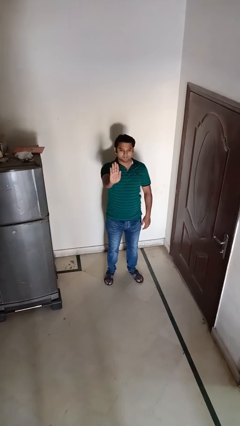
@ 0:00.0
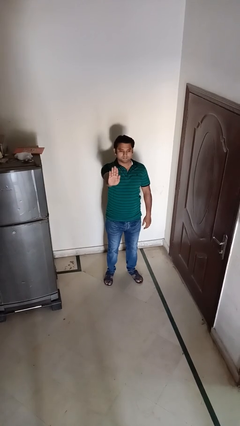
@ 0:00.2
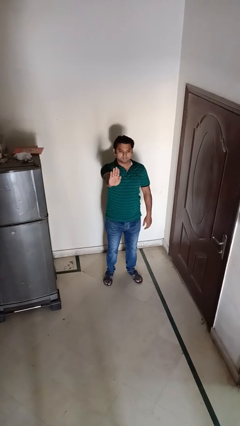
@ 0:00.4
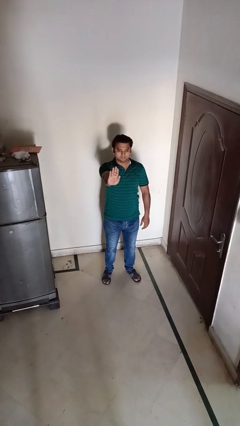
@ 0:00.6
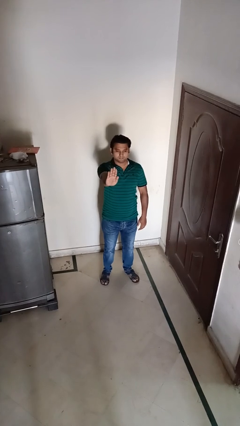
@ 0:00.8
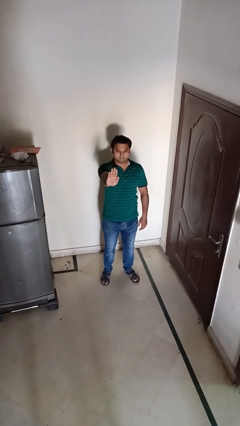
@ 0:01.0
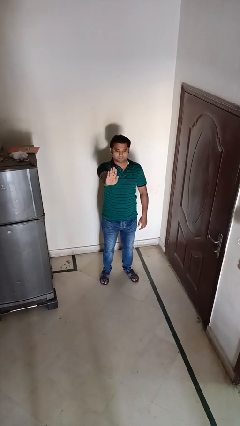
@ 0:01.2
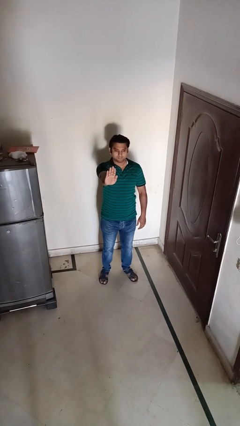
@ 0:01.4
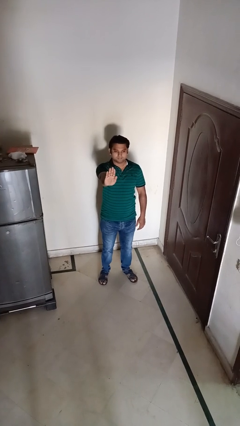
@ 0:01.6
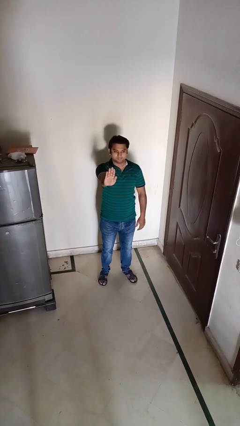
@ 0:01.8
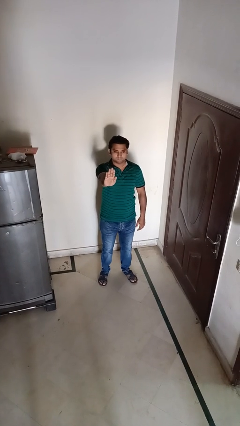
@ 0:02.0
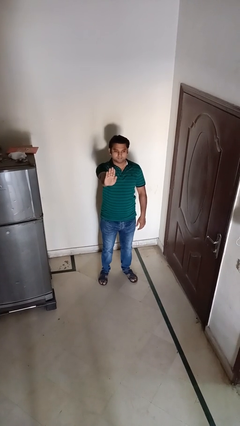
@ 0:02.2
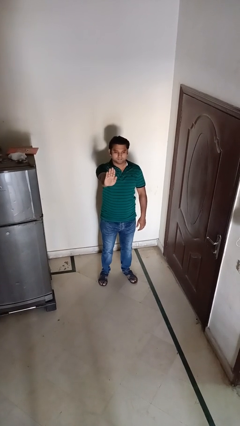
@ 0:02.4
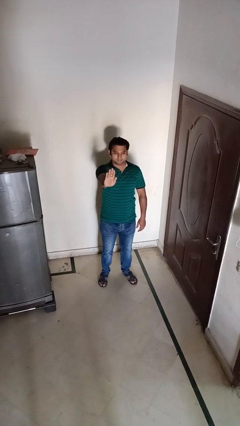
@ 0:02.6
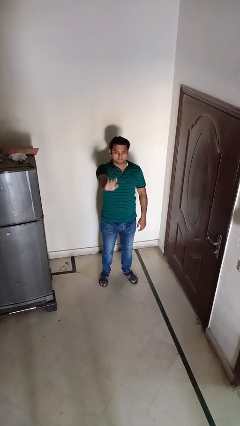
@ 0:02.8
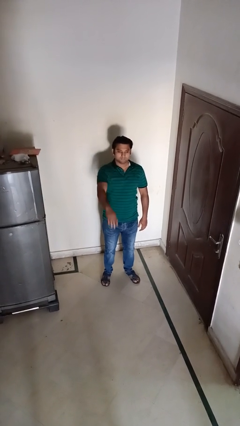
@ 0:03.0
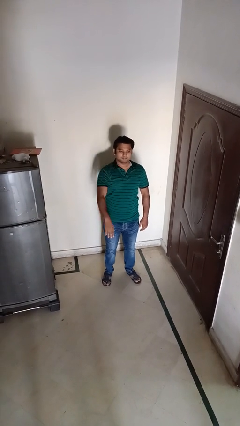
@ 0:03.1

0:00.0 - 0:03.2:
person gestures stop

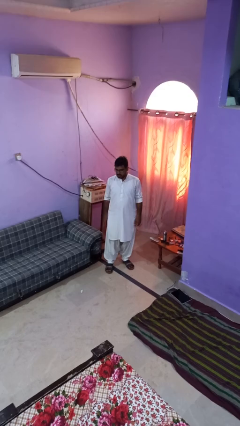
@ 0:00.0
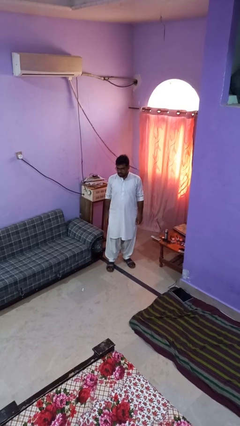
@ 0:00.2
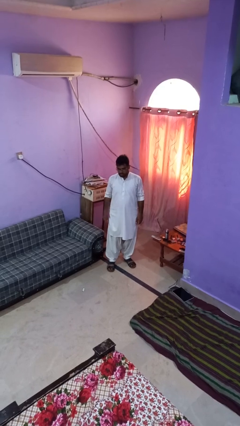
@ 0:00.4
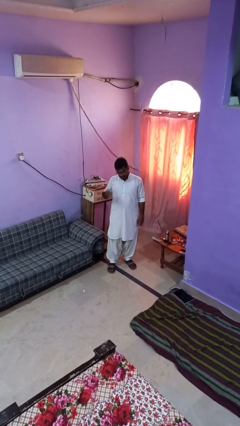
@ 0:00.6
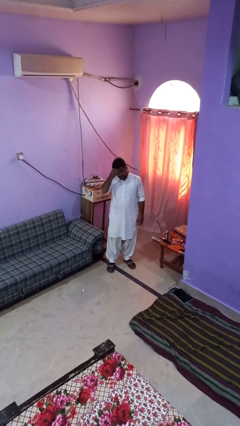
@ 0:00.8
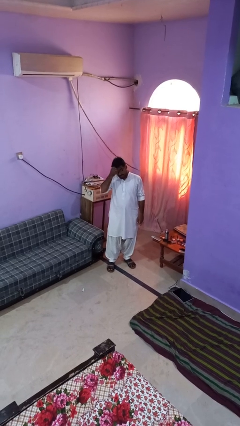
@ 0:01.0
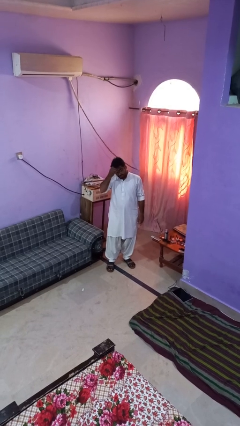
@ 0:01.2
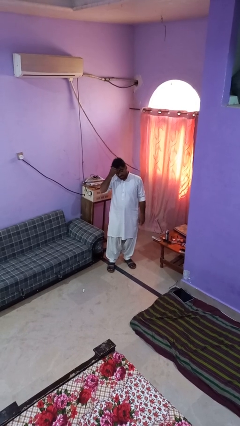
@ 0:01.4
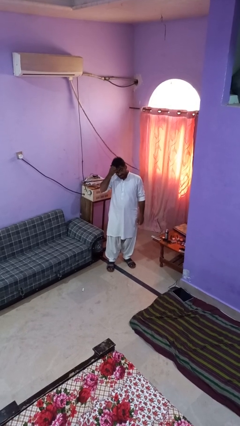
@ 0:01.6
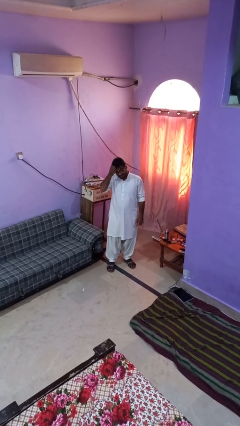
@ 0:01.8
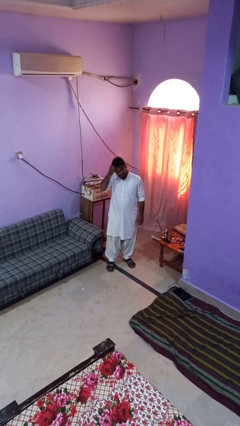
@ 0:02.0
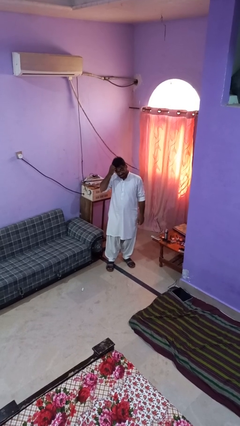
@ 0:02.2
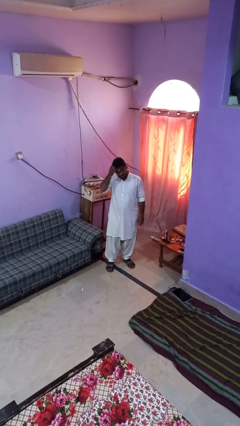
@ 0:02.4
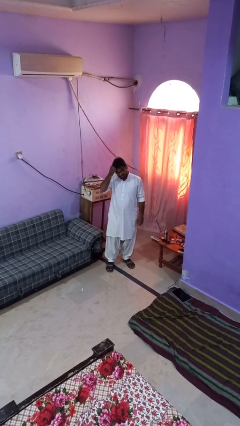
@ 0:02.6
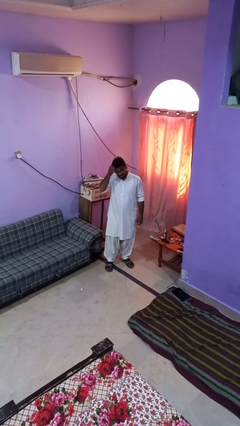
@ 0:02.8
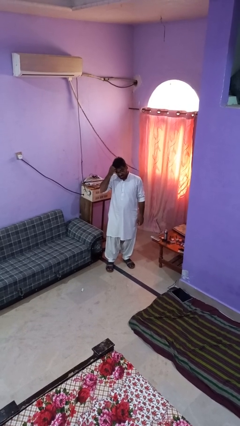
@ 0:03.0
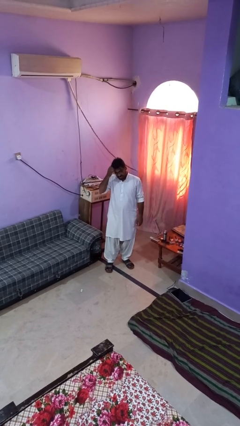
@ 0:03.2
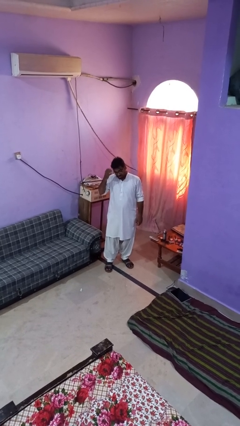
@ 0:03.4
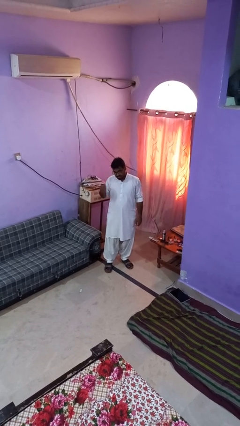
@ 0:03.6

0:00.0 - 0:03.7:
person scratches face

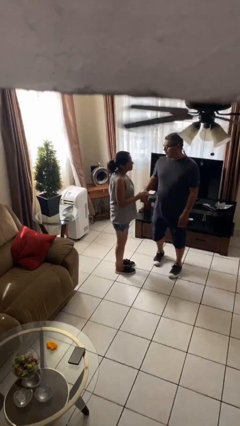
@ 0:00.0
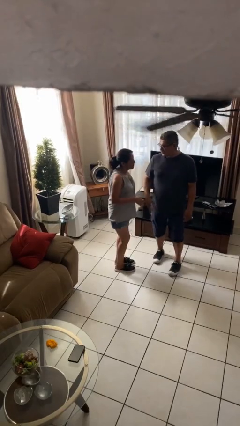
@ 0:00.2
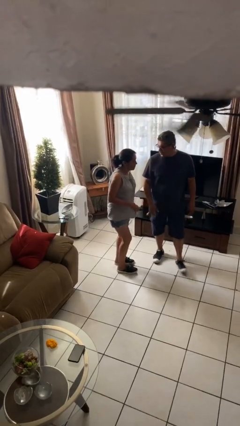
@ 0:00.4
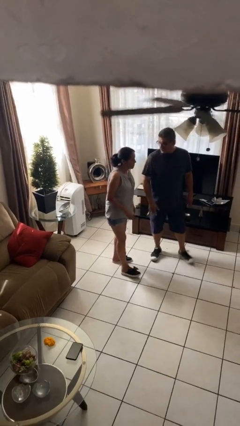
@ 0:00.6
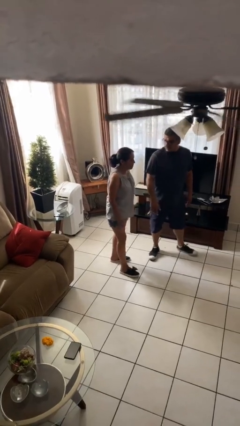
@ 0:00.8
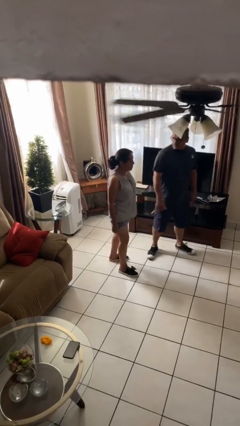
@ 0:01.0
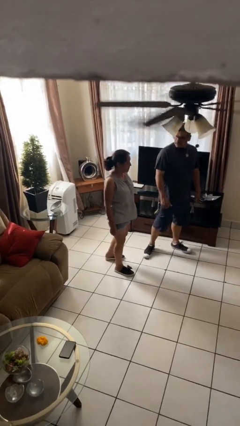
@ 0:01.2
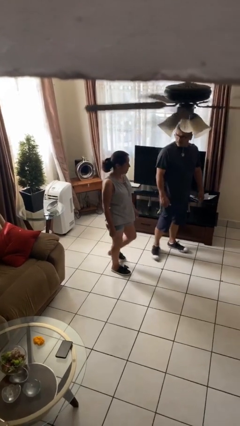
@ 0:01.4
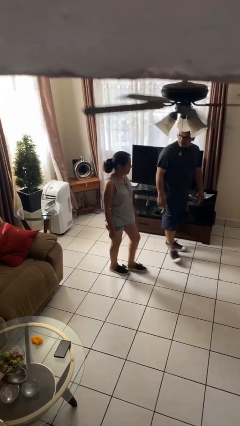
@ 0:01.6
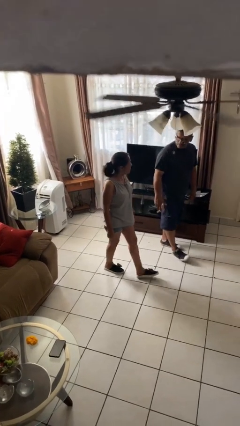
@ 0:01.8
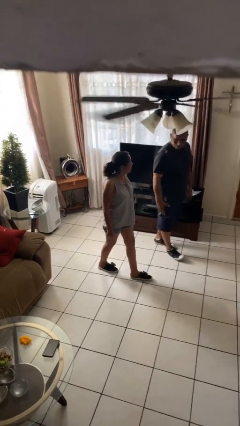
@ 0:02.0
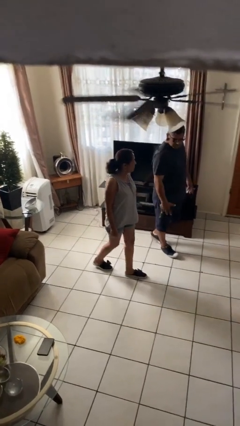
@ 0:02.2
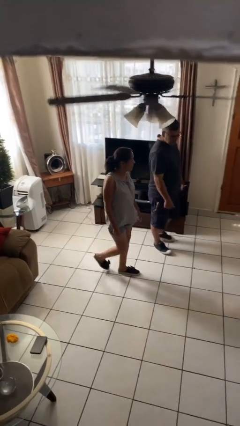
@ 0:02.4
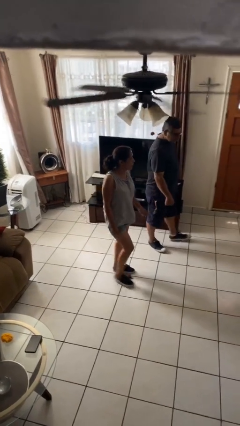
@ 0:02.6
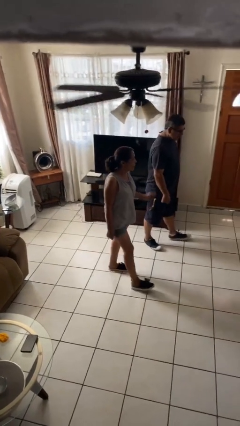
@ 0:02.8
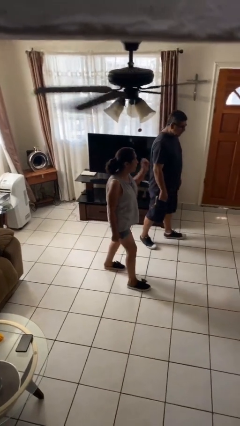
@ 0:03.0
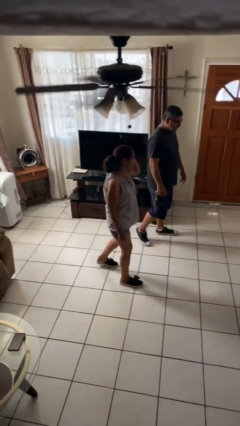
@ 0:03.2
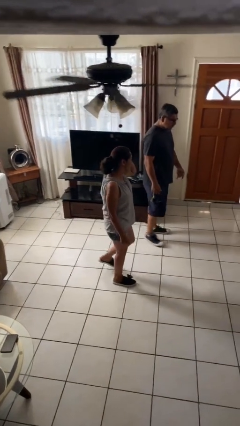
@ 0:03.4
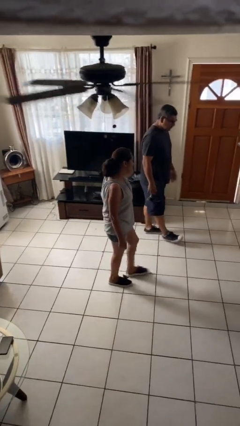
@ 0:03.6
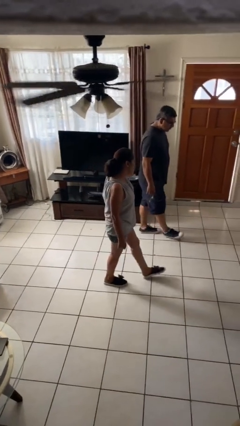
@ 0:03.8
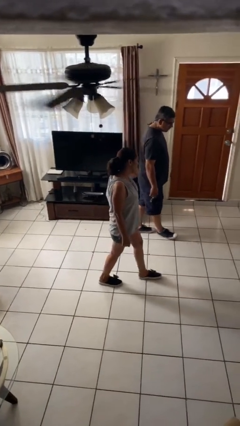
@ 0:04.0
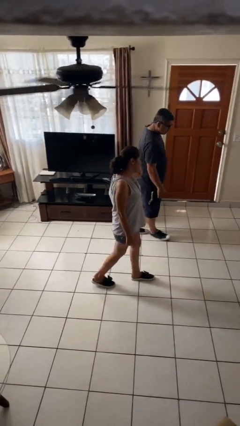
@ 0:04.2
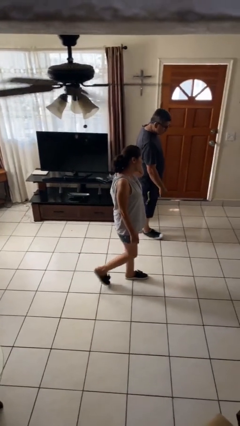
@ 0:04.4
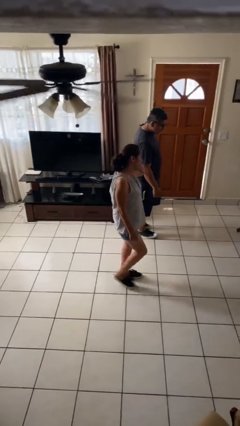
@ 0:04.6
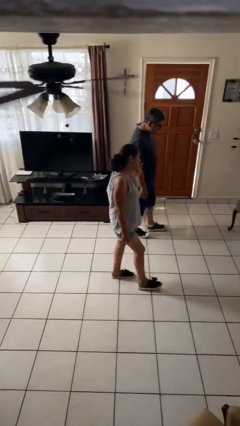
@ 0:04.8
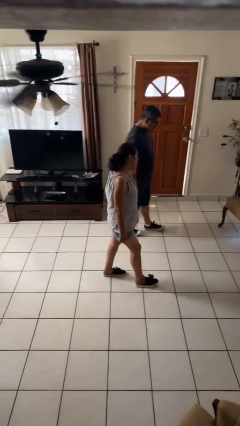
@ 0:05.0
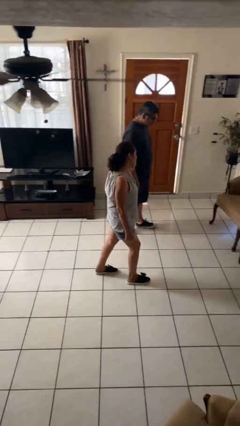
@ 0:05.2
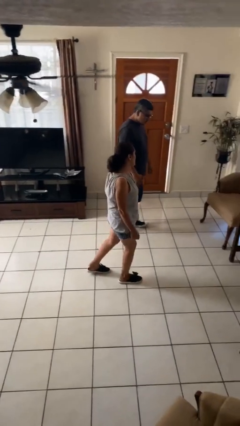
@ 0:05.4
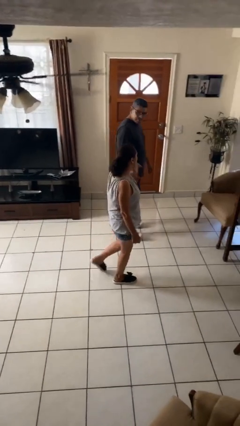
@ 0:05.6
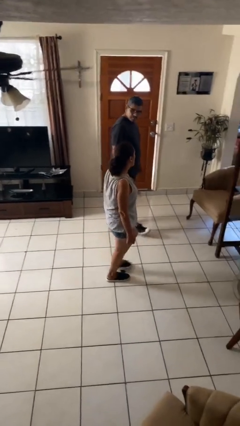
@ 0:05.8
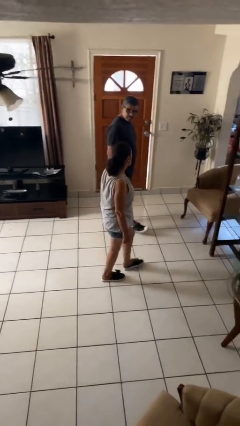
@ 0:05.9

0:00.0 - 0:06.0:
person talks to person

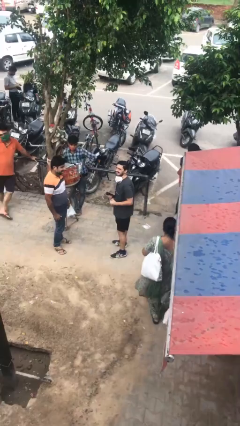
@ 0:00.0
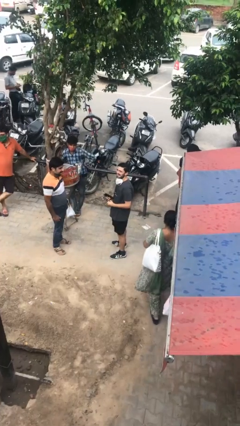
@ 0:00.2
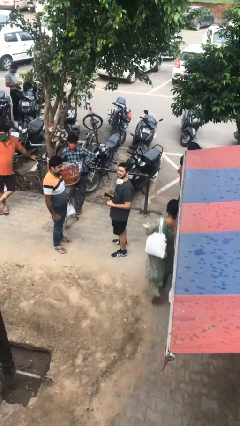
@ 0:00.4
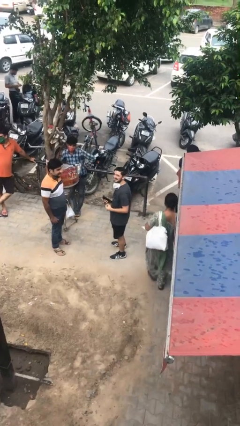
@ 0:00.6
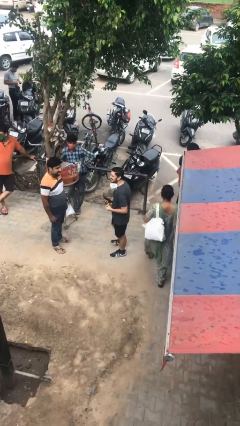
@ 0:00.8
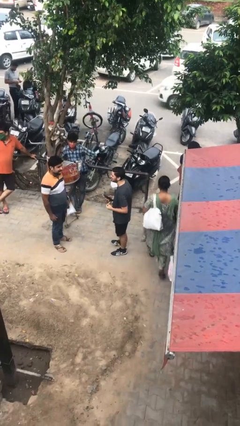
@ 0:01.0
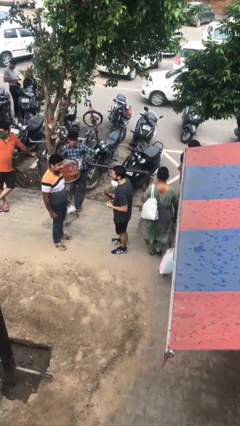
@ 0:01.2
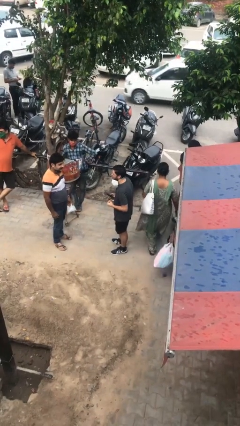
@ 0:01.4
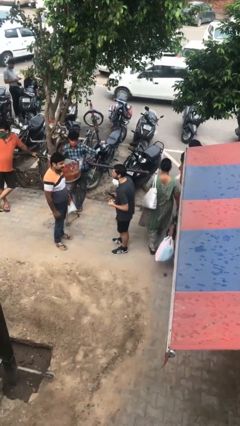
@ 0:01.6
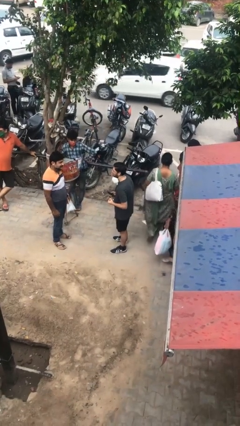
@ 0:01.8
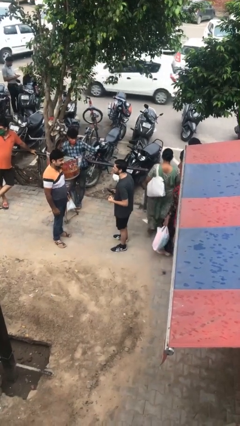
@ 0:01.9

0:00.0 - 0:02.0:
person laughs with person

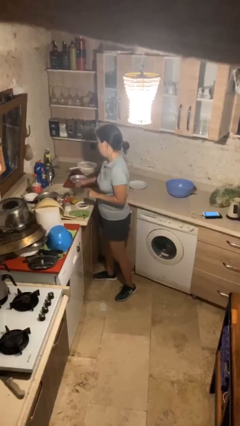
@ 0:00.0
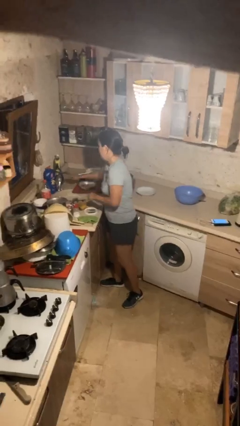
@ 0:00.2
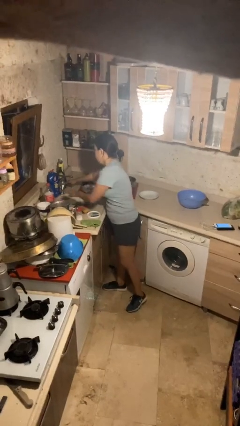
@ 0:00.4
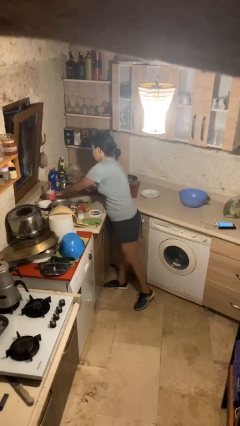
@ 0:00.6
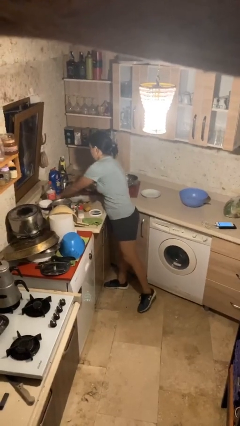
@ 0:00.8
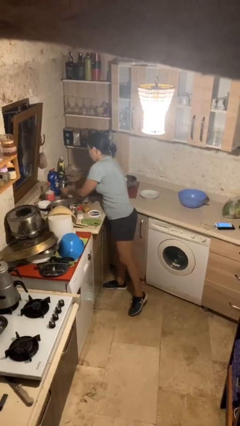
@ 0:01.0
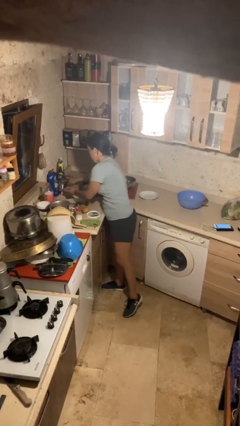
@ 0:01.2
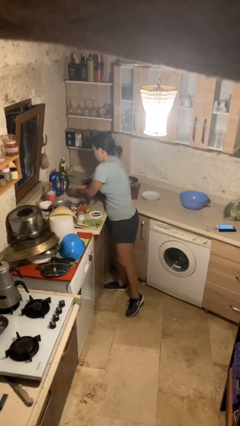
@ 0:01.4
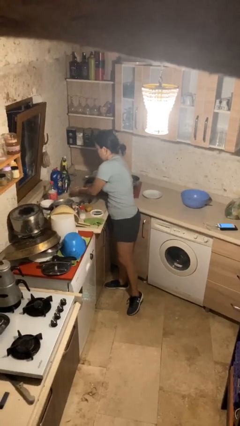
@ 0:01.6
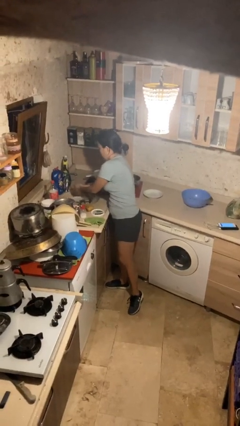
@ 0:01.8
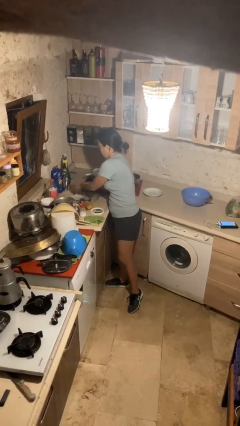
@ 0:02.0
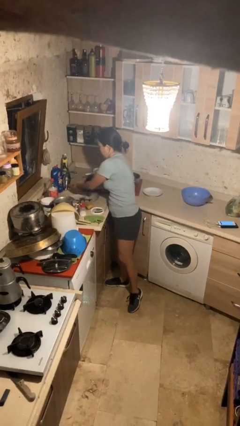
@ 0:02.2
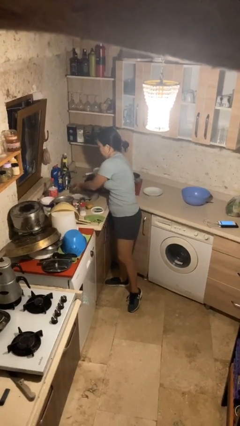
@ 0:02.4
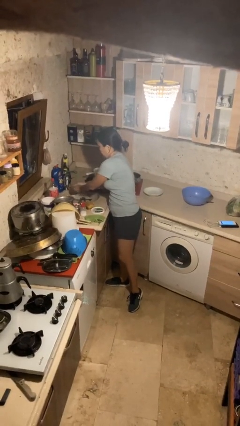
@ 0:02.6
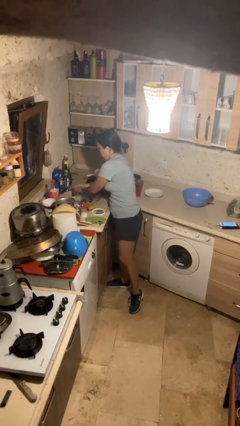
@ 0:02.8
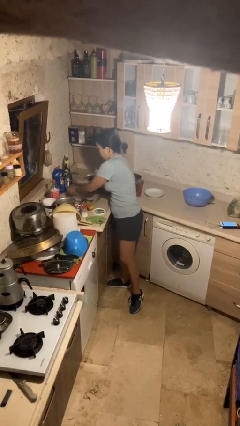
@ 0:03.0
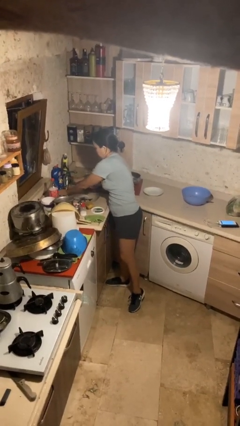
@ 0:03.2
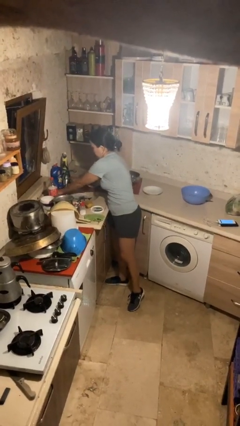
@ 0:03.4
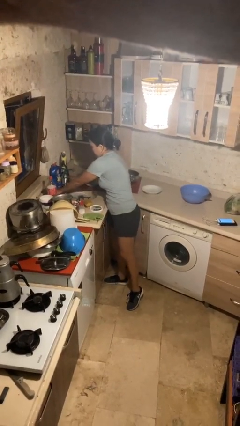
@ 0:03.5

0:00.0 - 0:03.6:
person washes hands
